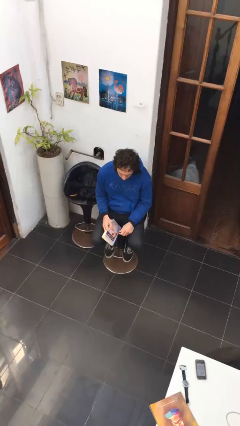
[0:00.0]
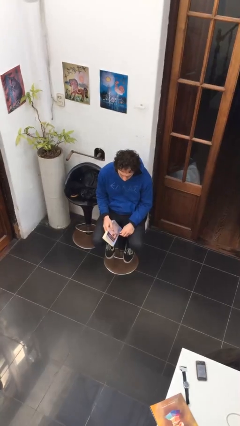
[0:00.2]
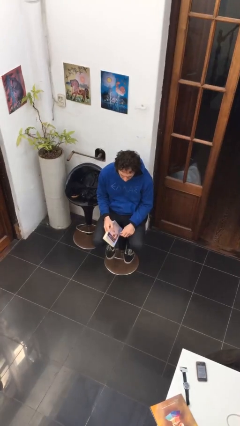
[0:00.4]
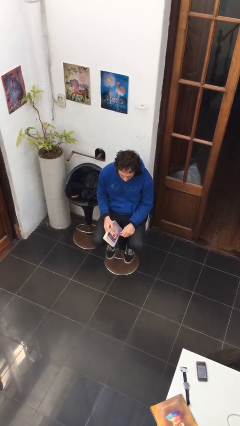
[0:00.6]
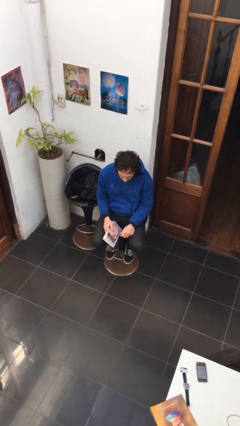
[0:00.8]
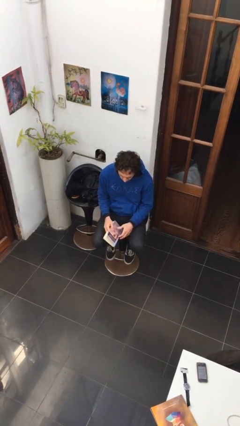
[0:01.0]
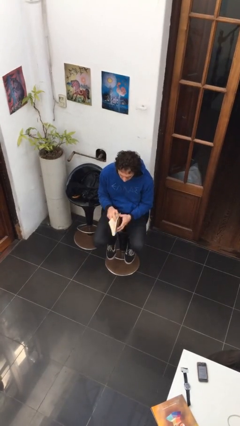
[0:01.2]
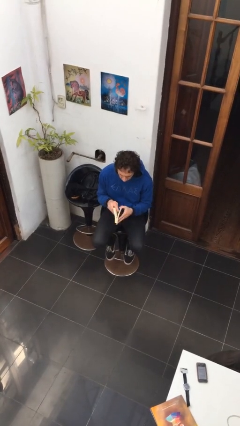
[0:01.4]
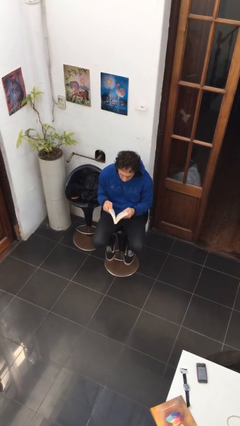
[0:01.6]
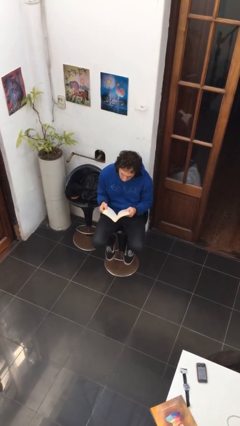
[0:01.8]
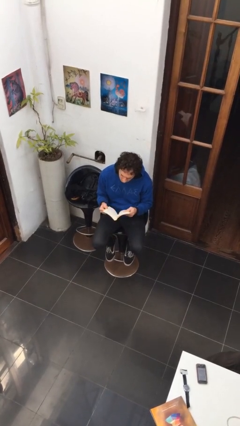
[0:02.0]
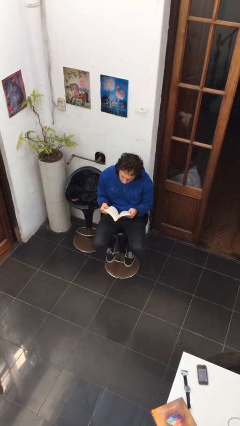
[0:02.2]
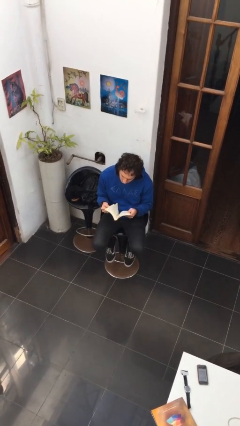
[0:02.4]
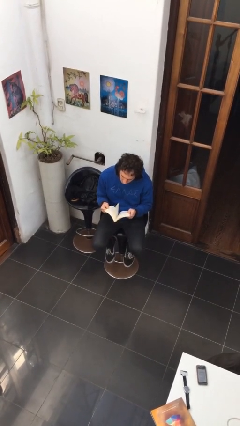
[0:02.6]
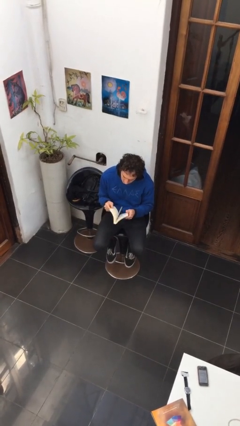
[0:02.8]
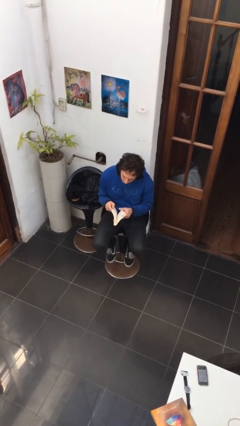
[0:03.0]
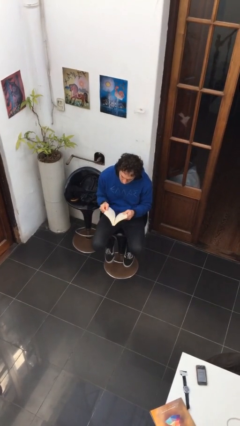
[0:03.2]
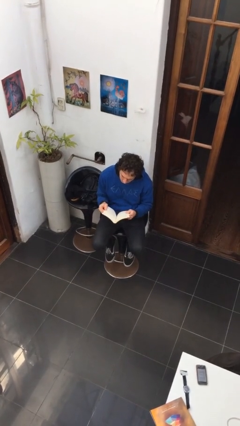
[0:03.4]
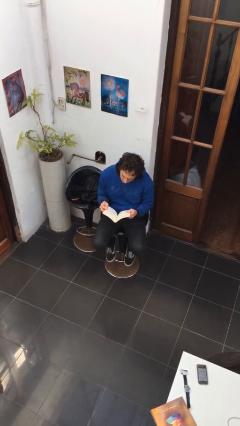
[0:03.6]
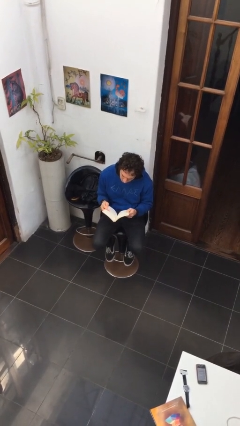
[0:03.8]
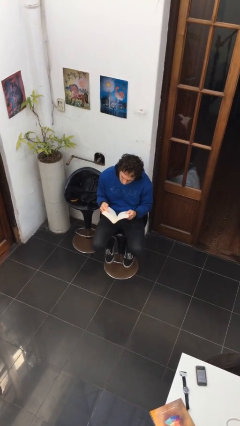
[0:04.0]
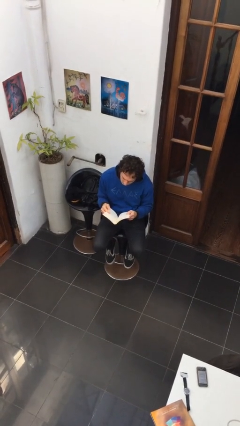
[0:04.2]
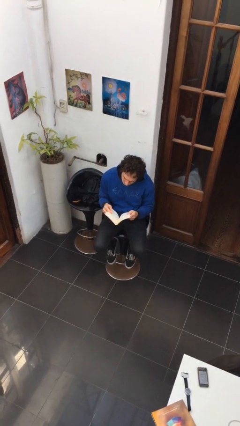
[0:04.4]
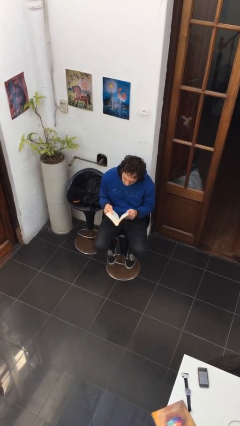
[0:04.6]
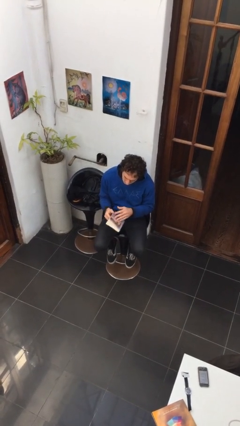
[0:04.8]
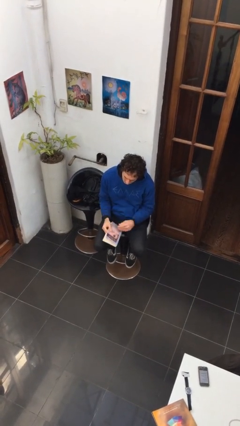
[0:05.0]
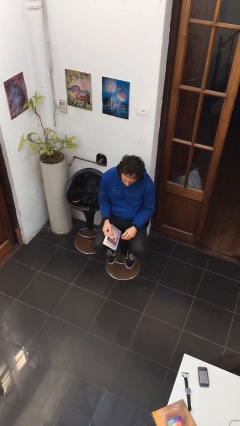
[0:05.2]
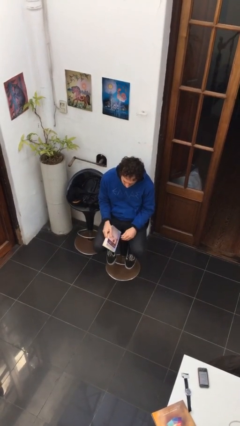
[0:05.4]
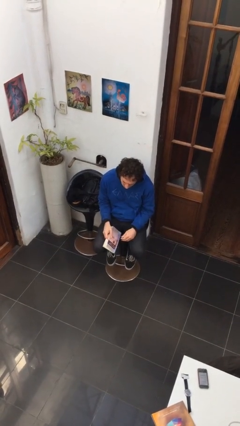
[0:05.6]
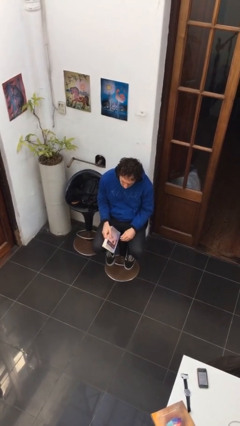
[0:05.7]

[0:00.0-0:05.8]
person reads book

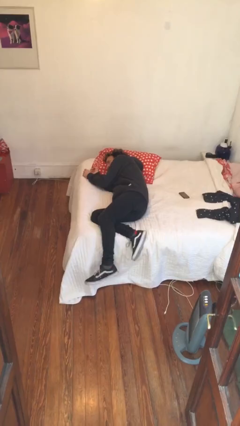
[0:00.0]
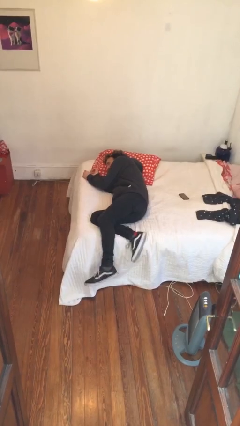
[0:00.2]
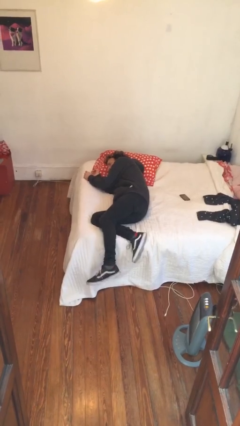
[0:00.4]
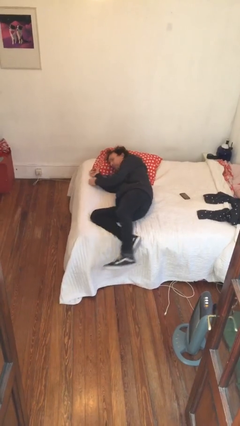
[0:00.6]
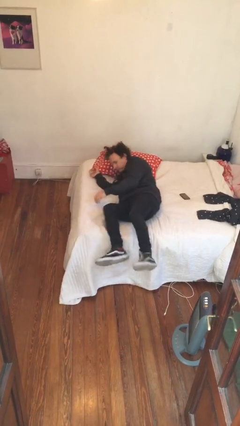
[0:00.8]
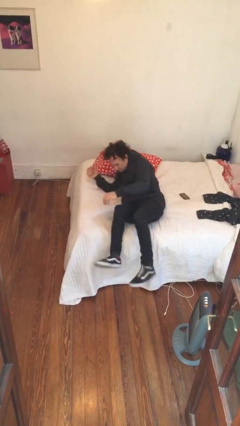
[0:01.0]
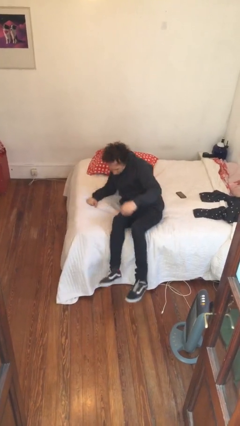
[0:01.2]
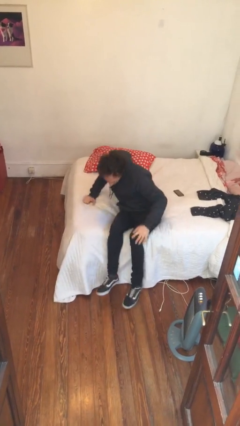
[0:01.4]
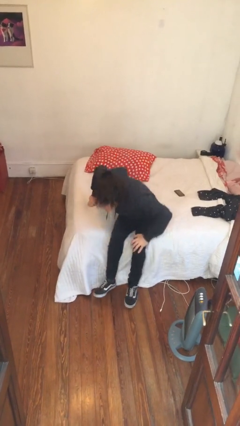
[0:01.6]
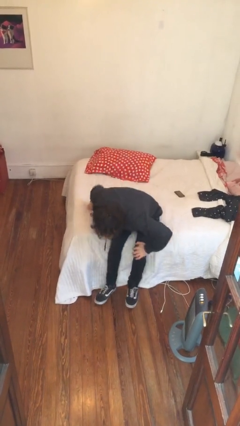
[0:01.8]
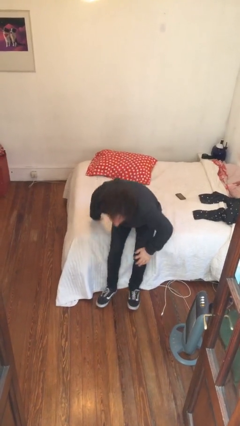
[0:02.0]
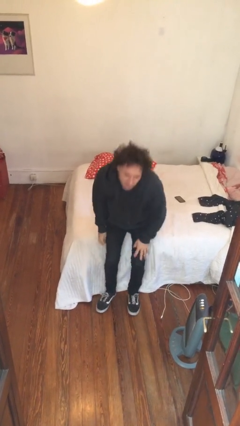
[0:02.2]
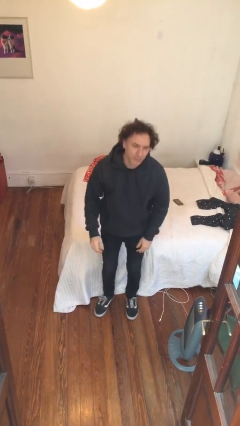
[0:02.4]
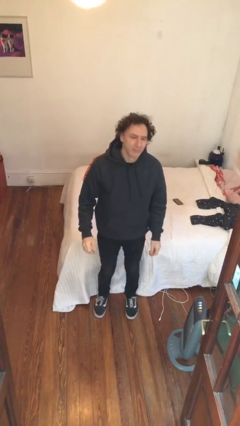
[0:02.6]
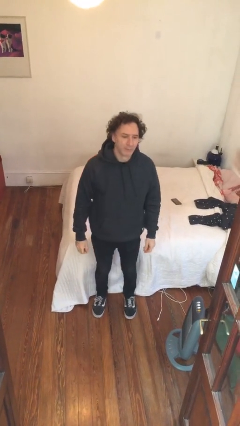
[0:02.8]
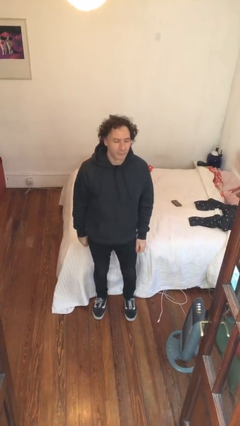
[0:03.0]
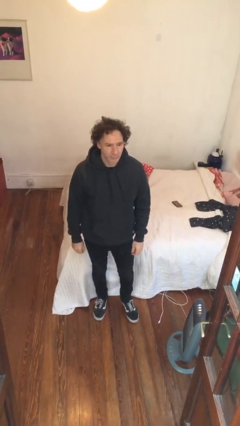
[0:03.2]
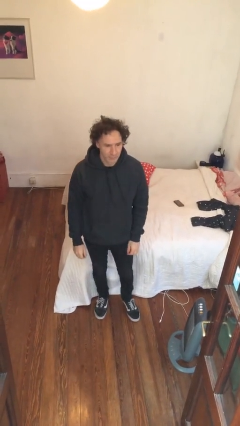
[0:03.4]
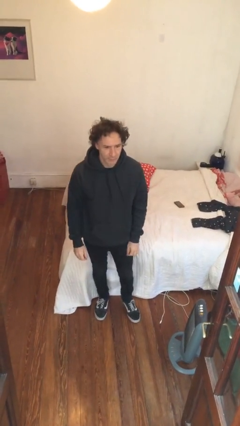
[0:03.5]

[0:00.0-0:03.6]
person stands up

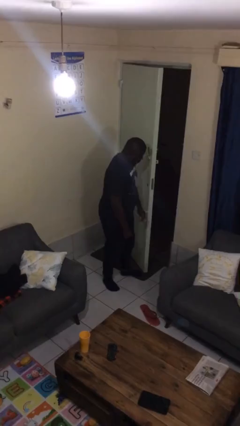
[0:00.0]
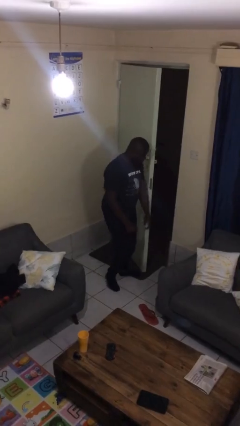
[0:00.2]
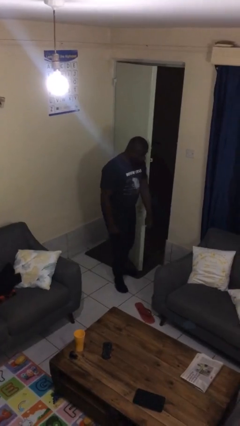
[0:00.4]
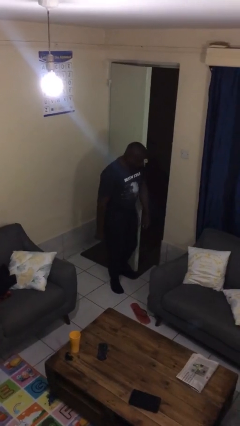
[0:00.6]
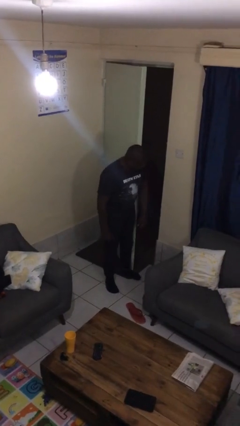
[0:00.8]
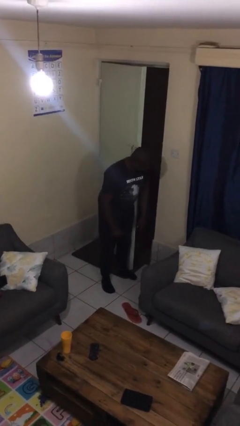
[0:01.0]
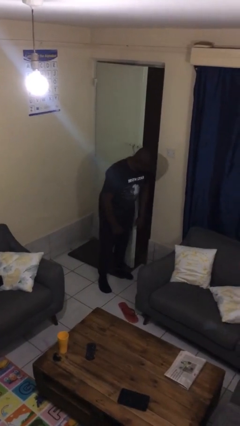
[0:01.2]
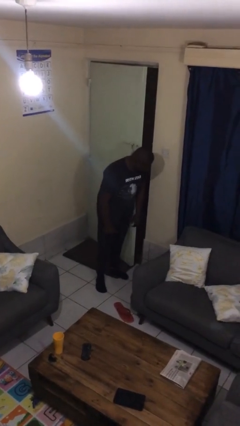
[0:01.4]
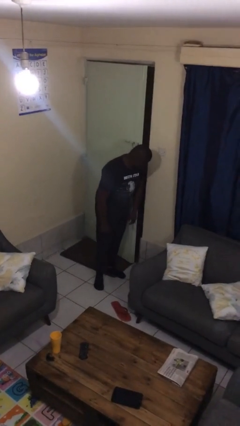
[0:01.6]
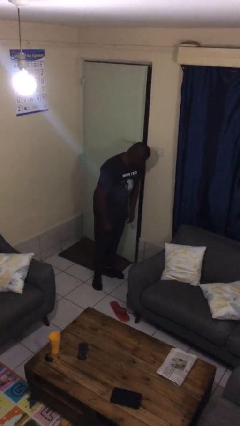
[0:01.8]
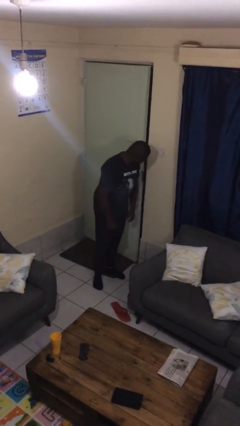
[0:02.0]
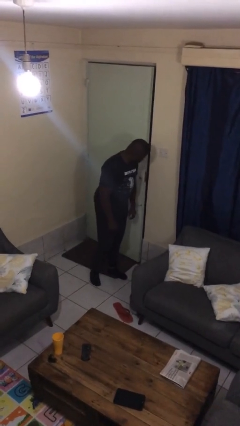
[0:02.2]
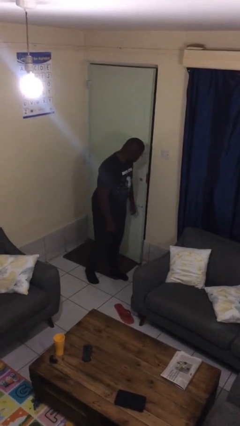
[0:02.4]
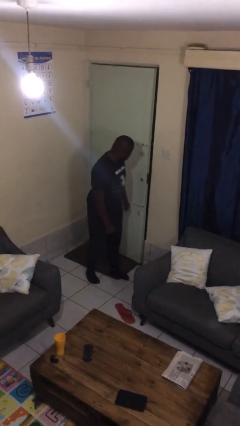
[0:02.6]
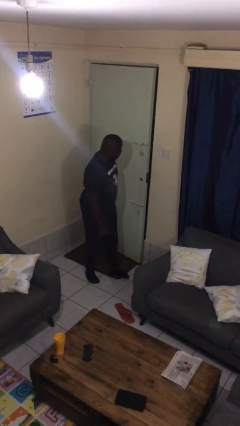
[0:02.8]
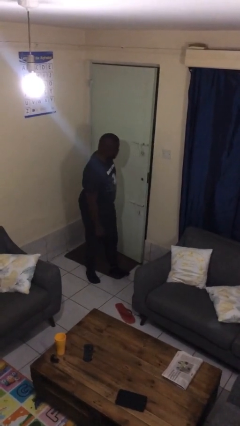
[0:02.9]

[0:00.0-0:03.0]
person closes door with hip

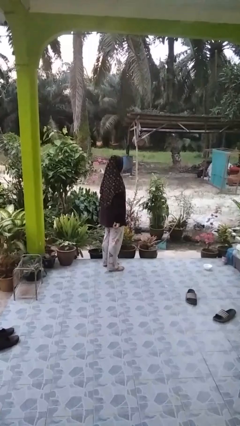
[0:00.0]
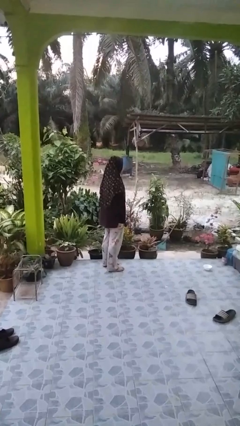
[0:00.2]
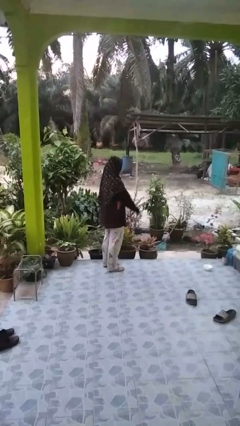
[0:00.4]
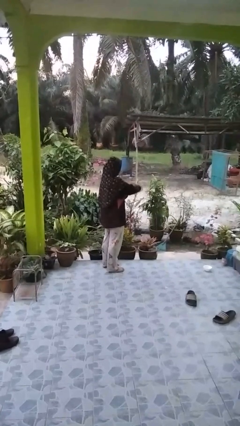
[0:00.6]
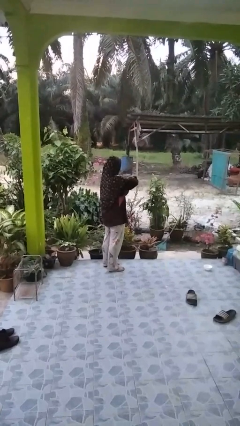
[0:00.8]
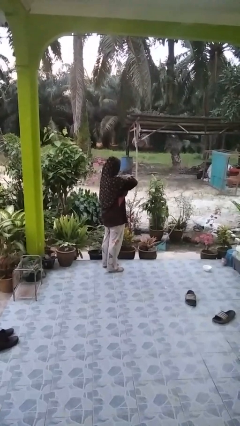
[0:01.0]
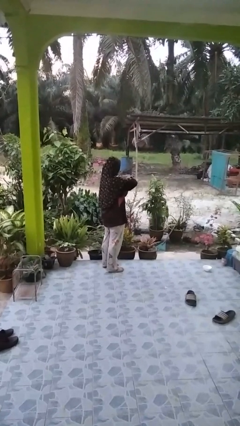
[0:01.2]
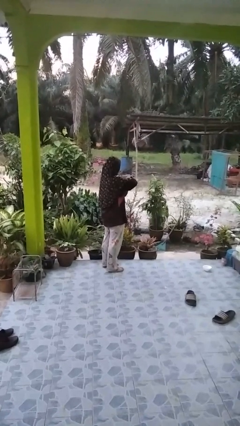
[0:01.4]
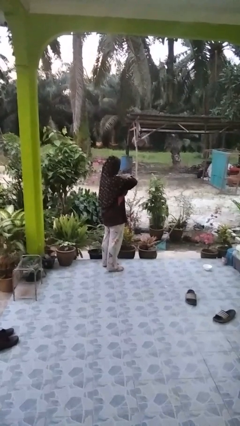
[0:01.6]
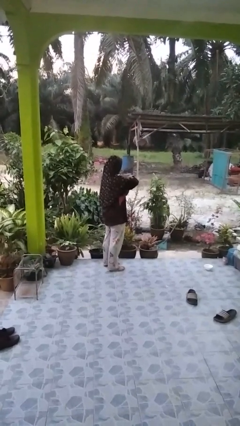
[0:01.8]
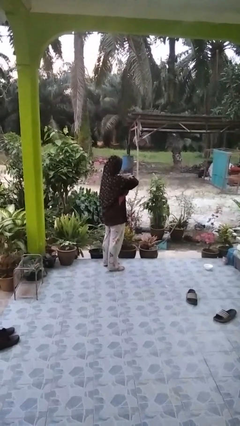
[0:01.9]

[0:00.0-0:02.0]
person looks at wristwatch

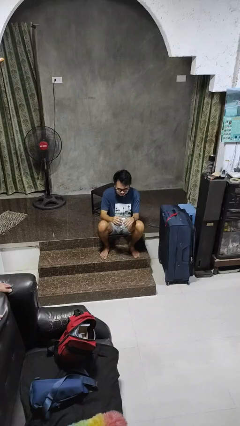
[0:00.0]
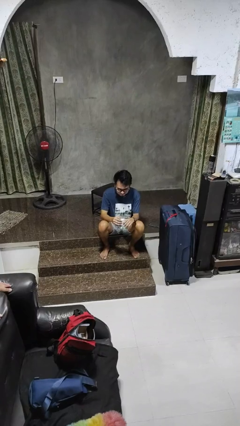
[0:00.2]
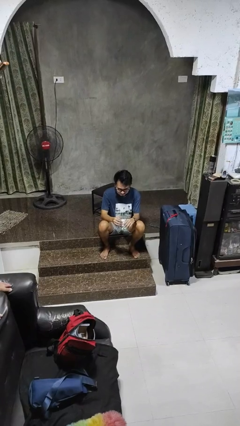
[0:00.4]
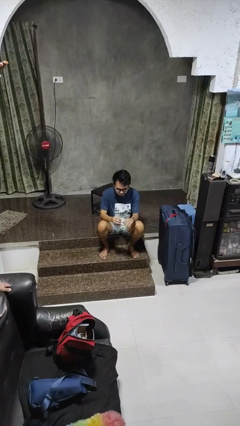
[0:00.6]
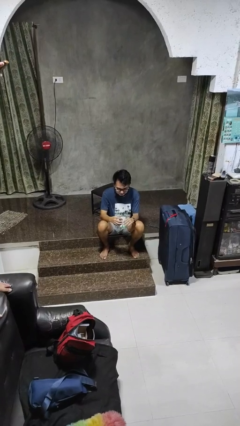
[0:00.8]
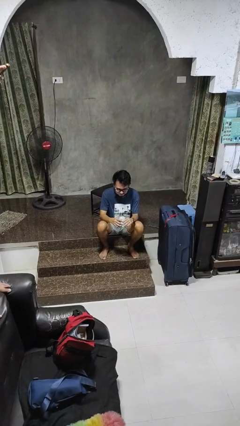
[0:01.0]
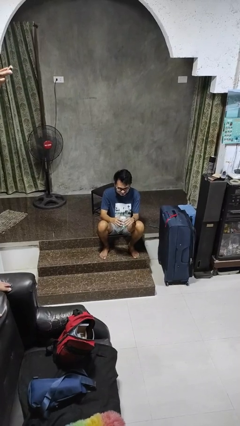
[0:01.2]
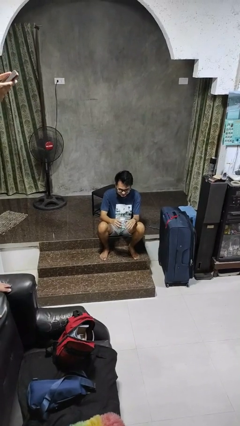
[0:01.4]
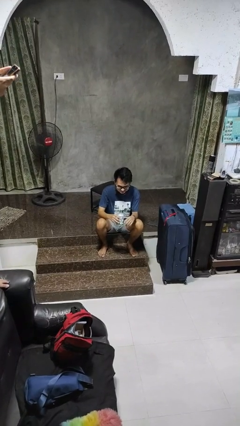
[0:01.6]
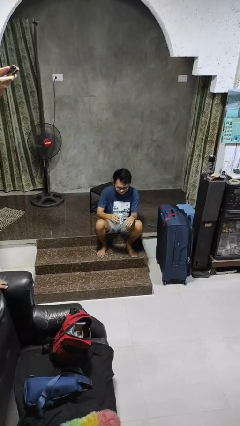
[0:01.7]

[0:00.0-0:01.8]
person opens beverage can

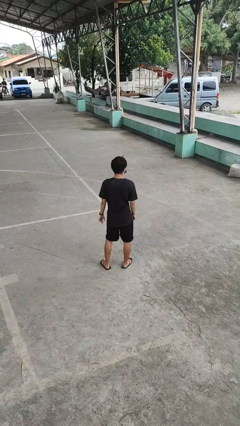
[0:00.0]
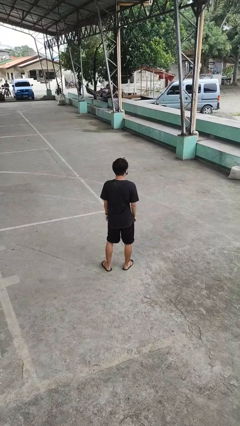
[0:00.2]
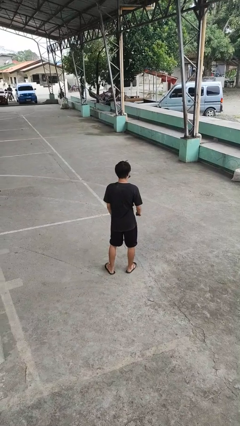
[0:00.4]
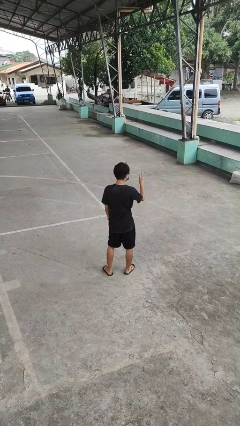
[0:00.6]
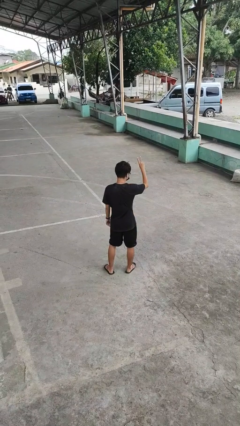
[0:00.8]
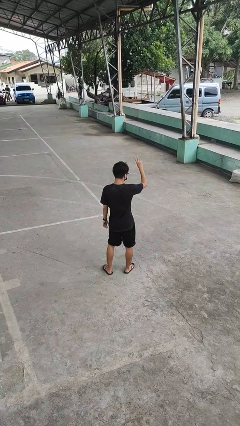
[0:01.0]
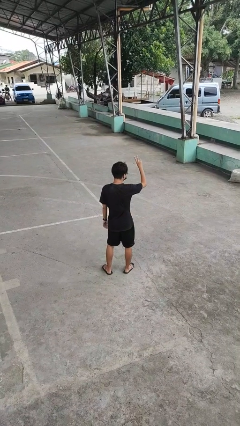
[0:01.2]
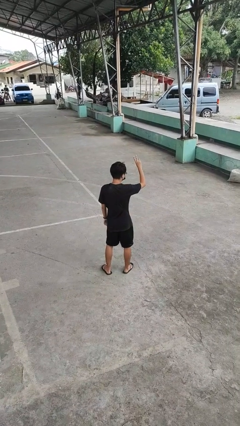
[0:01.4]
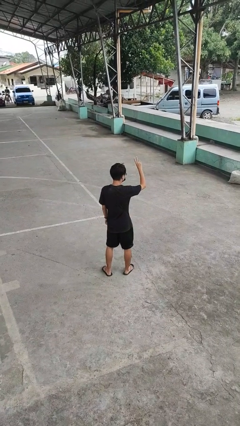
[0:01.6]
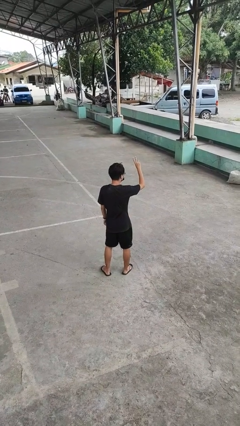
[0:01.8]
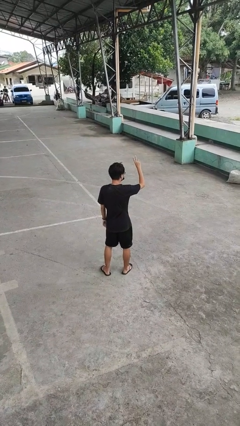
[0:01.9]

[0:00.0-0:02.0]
person gestures peace
